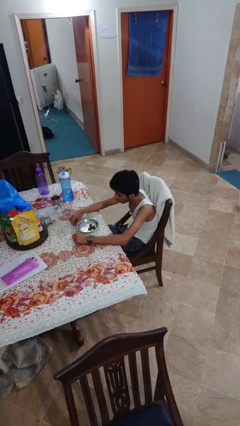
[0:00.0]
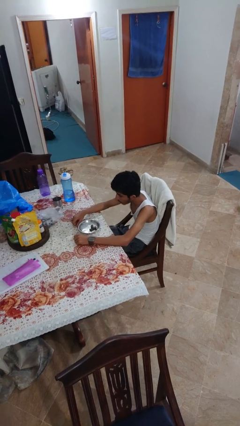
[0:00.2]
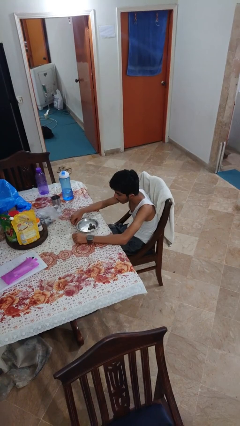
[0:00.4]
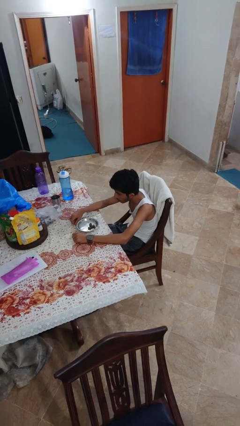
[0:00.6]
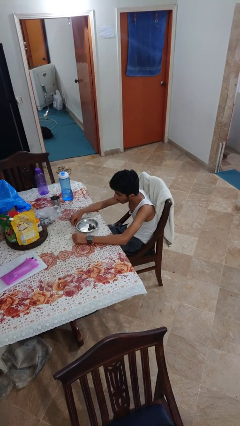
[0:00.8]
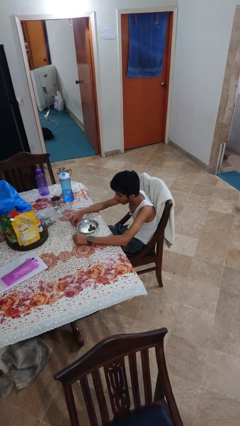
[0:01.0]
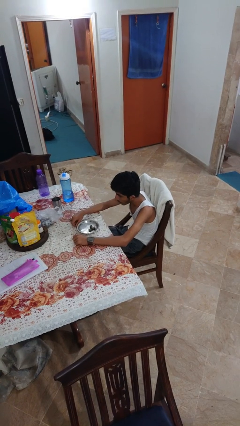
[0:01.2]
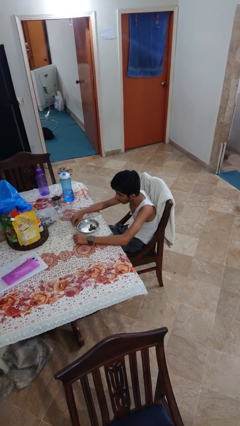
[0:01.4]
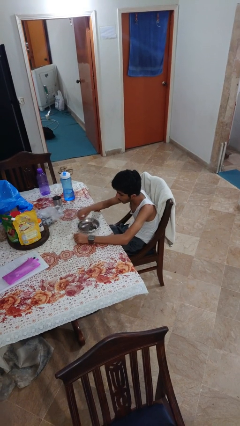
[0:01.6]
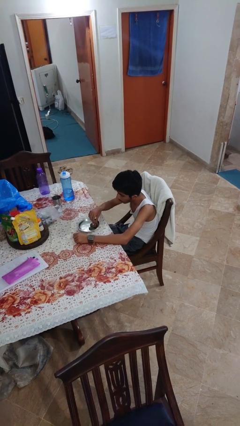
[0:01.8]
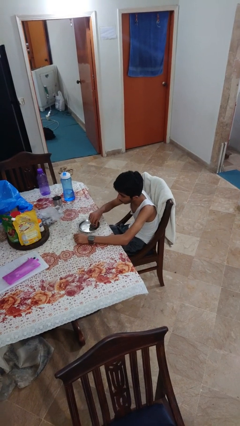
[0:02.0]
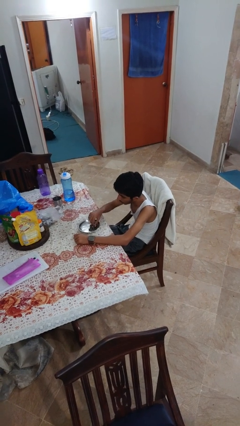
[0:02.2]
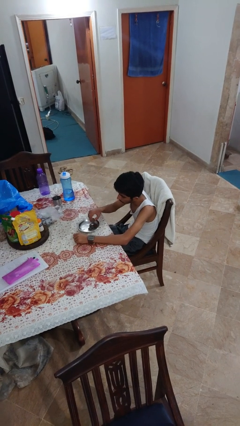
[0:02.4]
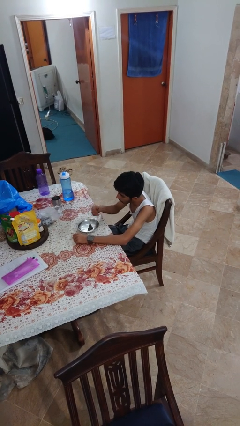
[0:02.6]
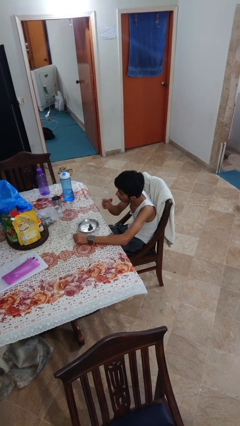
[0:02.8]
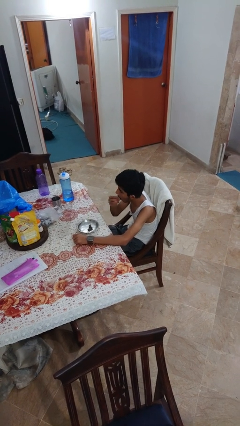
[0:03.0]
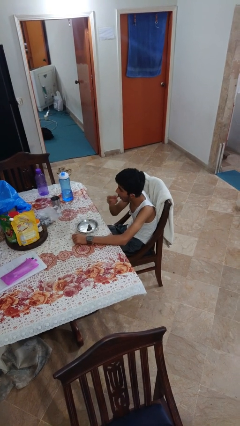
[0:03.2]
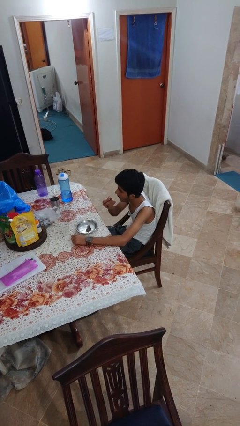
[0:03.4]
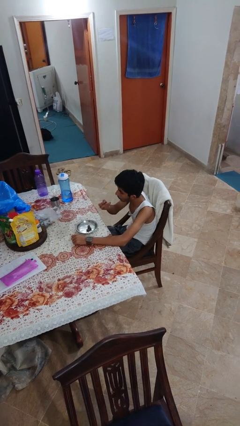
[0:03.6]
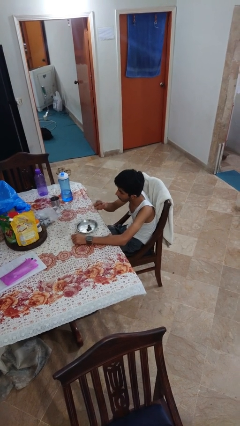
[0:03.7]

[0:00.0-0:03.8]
person eats with hands

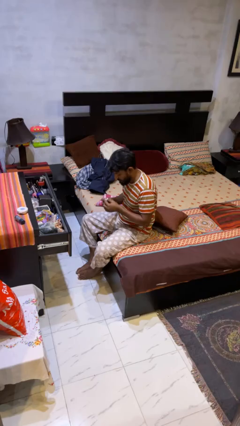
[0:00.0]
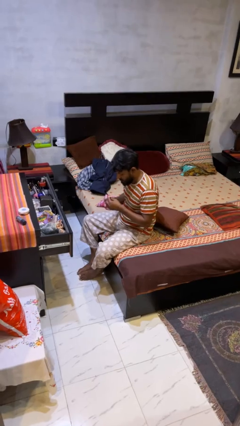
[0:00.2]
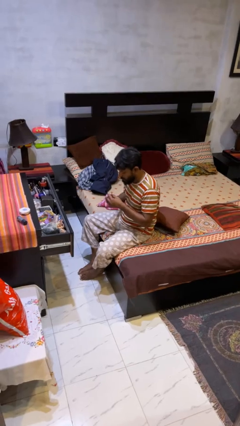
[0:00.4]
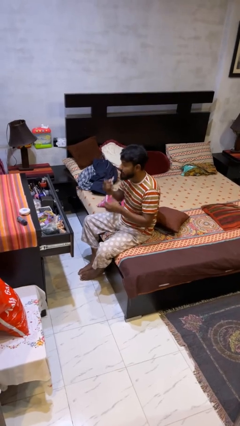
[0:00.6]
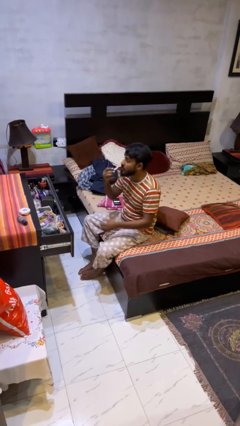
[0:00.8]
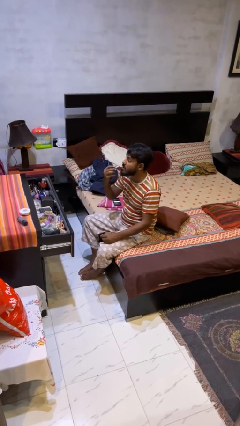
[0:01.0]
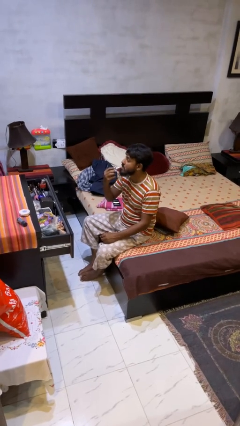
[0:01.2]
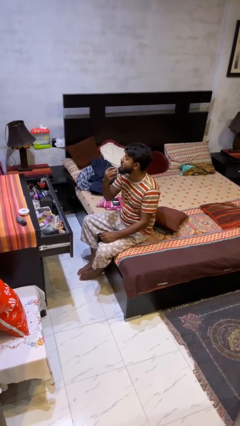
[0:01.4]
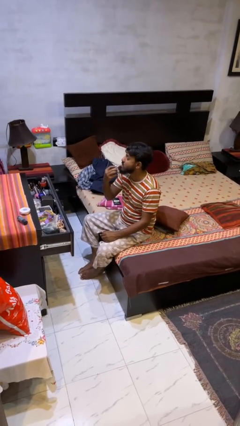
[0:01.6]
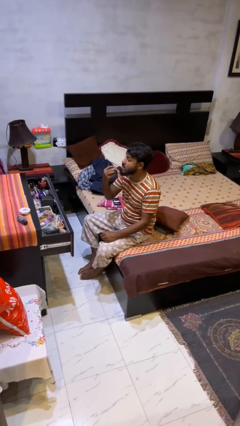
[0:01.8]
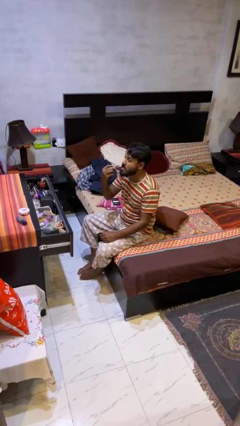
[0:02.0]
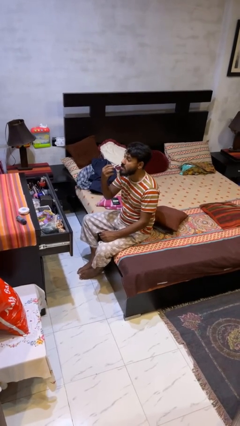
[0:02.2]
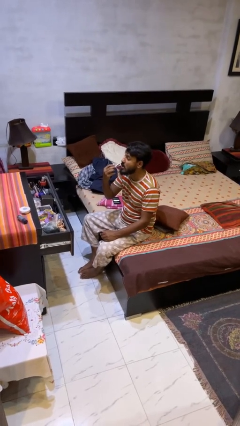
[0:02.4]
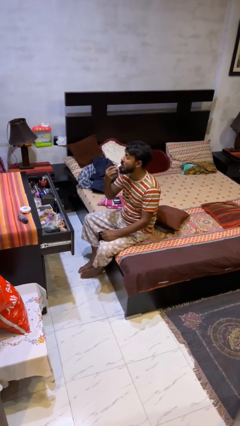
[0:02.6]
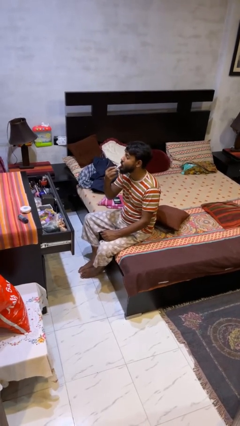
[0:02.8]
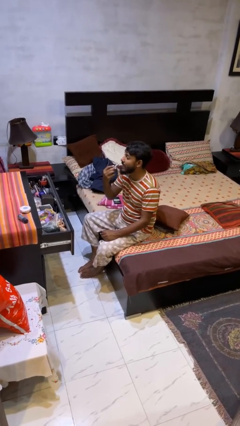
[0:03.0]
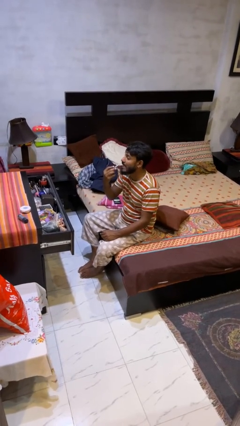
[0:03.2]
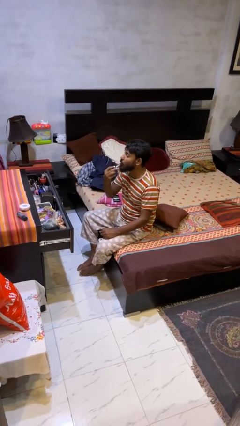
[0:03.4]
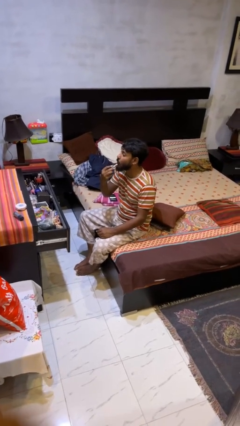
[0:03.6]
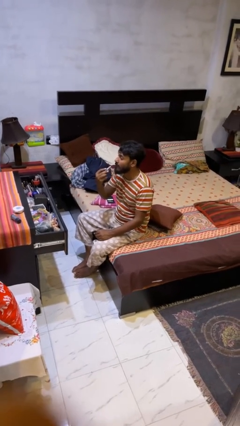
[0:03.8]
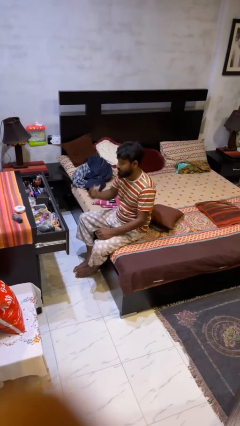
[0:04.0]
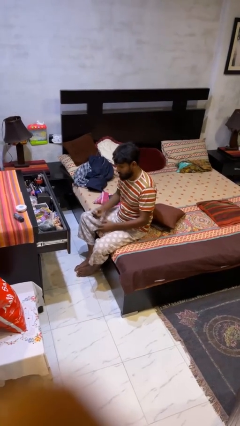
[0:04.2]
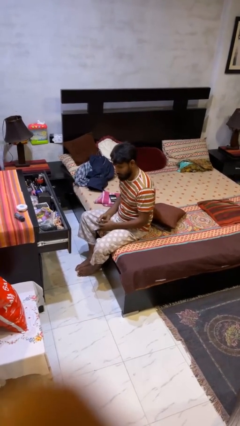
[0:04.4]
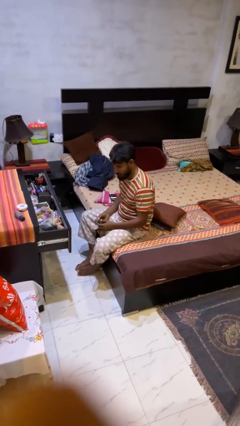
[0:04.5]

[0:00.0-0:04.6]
person applies lip makeup

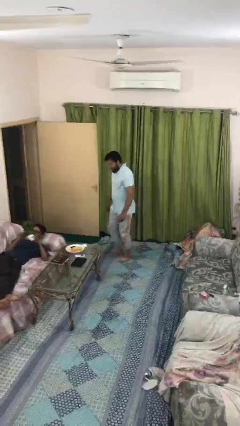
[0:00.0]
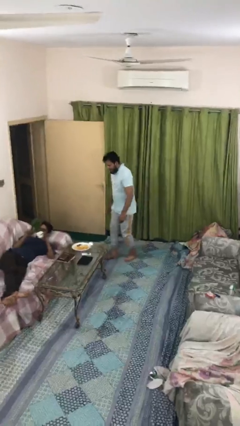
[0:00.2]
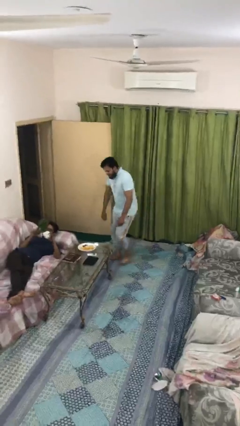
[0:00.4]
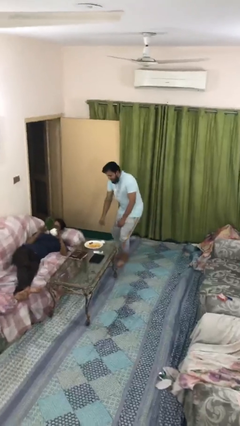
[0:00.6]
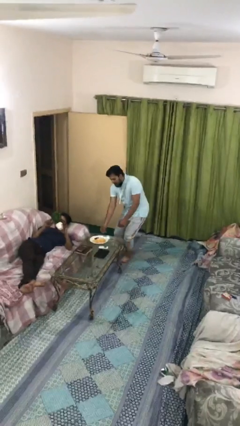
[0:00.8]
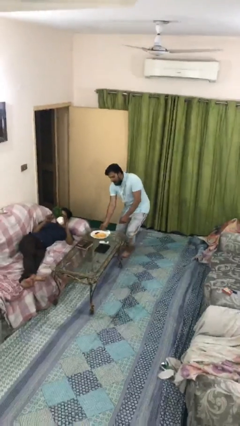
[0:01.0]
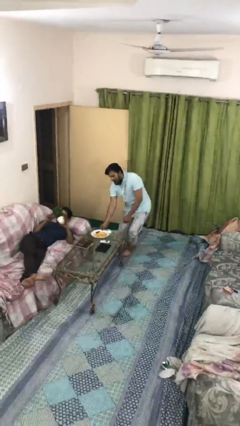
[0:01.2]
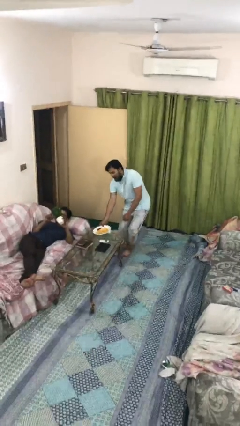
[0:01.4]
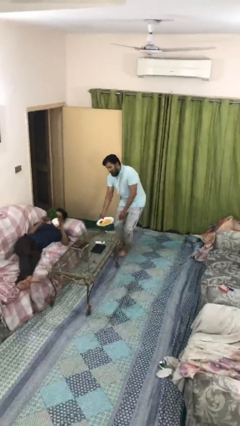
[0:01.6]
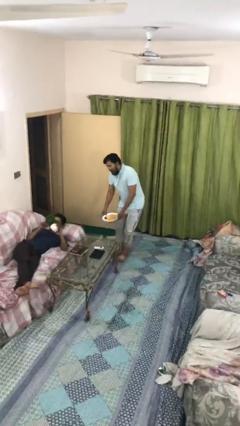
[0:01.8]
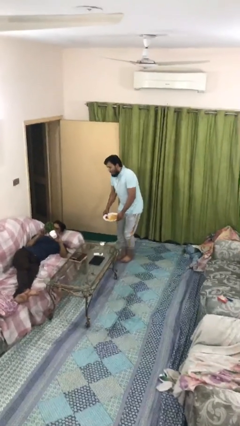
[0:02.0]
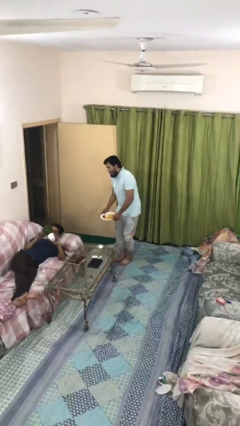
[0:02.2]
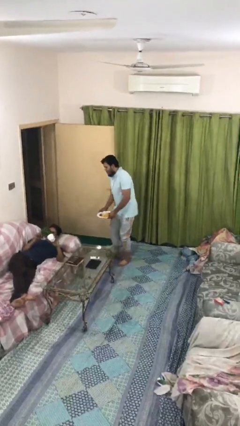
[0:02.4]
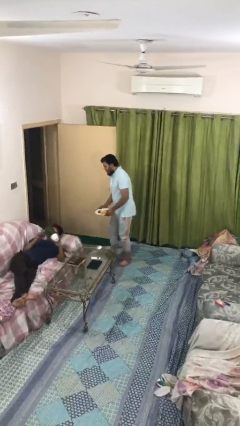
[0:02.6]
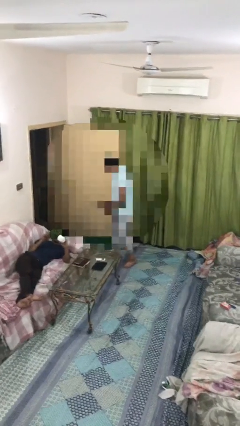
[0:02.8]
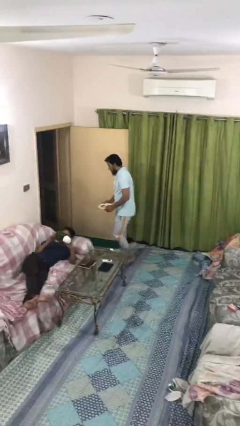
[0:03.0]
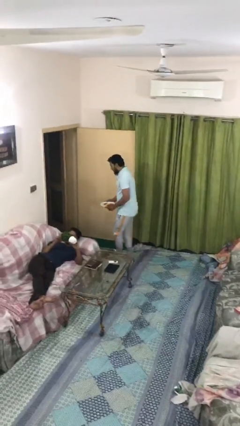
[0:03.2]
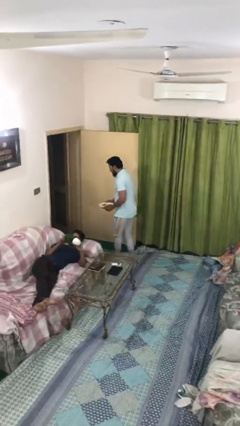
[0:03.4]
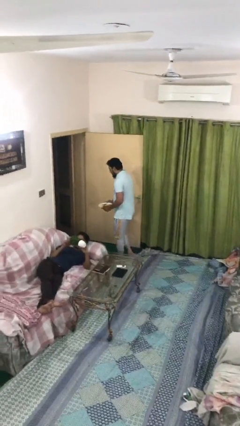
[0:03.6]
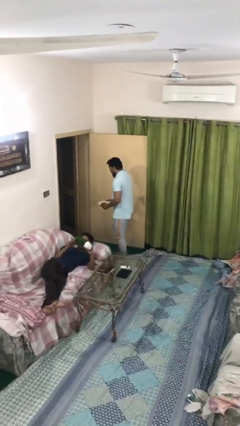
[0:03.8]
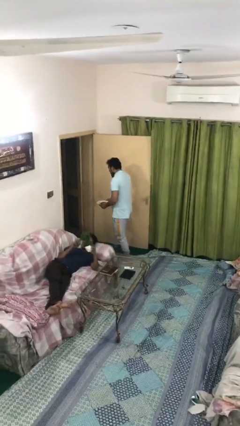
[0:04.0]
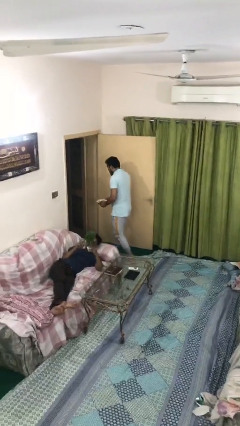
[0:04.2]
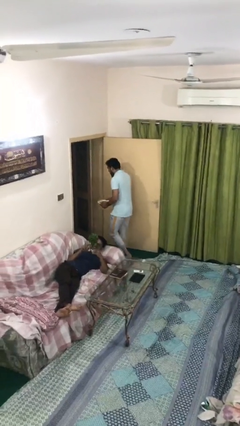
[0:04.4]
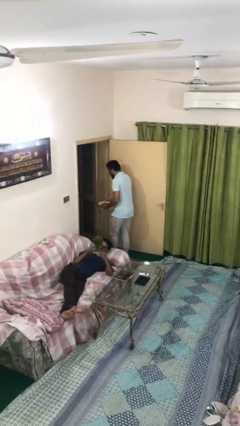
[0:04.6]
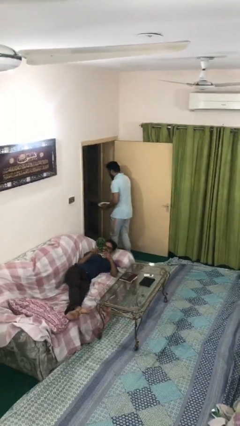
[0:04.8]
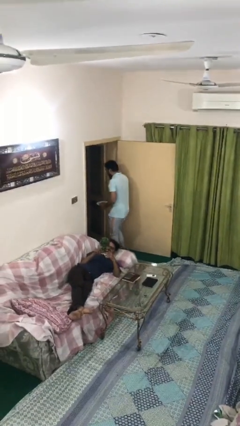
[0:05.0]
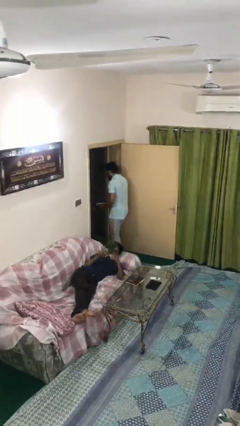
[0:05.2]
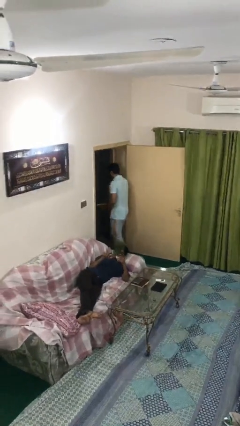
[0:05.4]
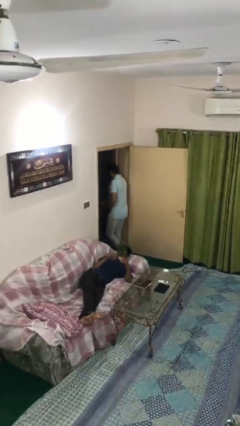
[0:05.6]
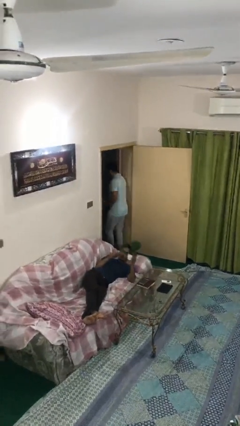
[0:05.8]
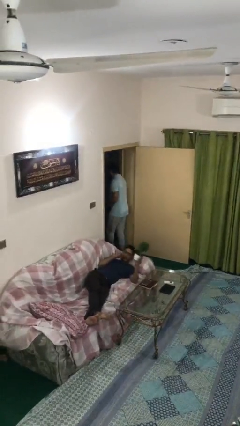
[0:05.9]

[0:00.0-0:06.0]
person steals object from person

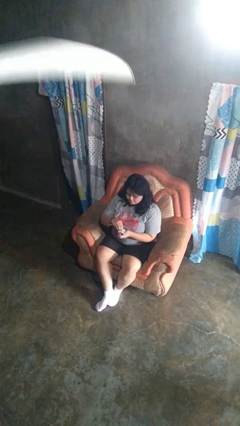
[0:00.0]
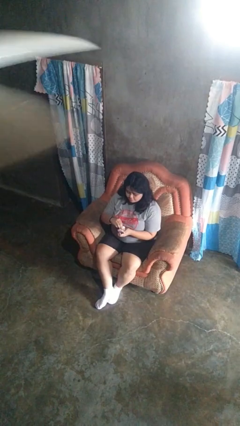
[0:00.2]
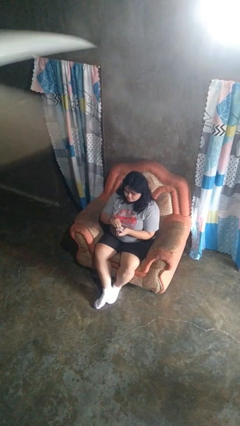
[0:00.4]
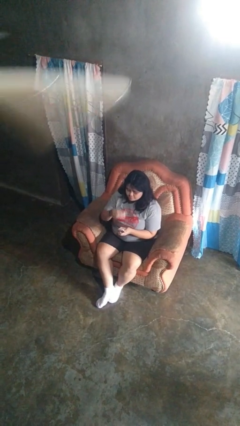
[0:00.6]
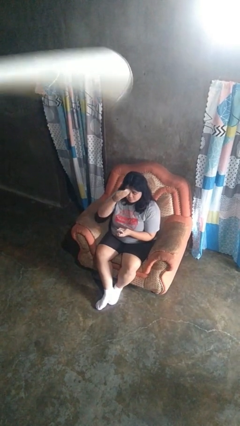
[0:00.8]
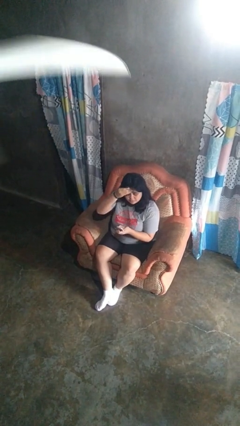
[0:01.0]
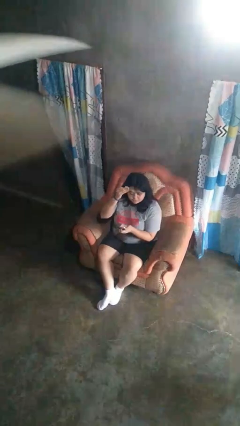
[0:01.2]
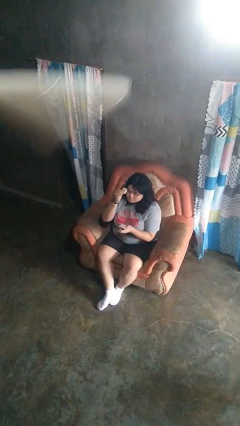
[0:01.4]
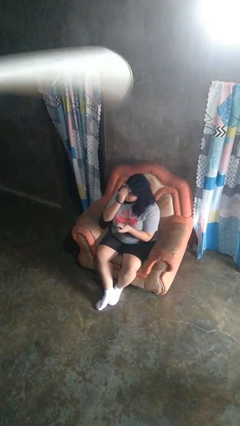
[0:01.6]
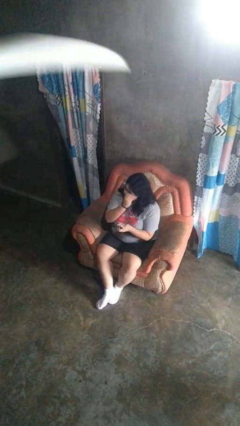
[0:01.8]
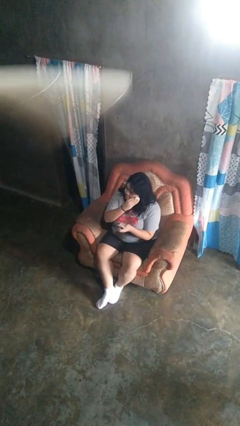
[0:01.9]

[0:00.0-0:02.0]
person applies foundation makeup

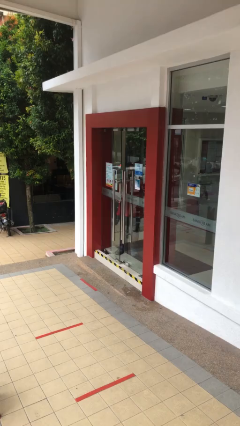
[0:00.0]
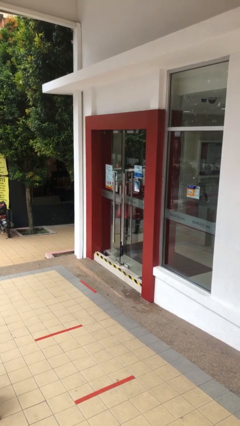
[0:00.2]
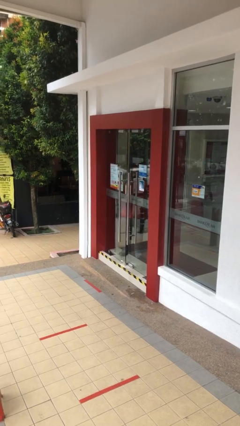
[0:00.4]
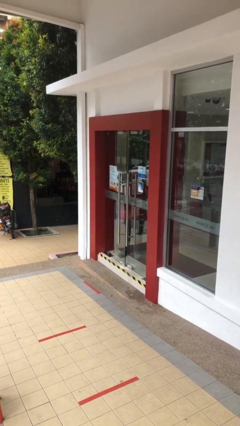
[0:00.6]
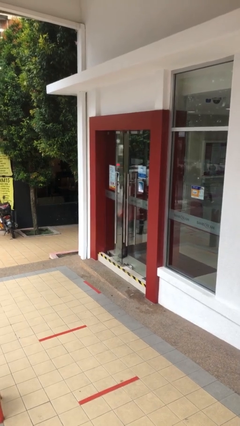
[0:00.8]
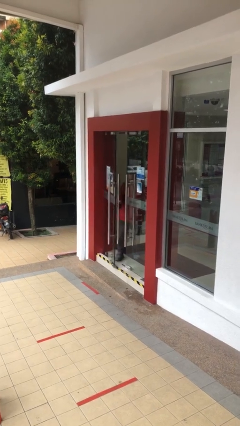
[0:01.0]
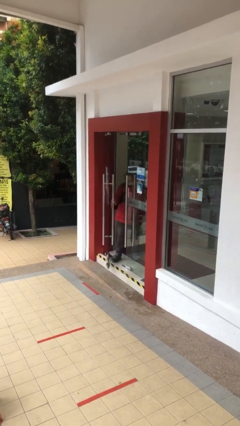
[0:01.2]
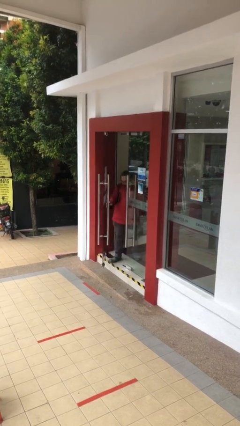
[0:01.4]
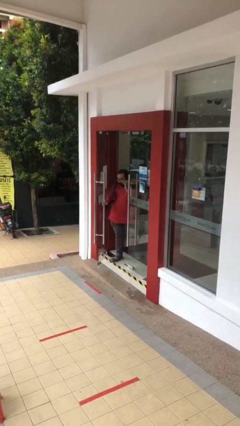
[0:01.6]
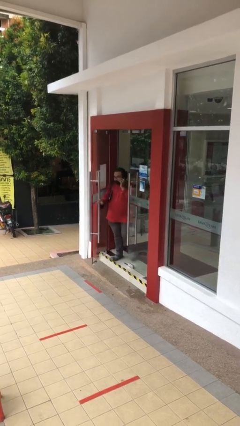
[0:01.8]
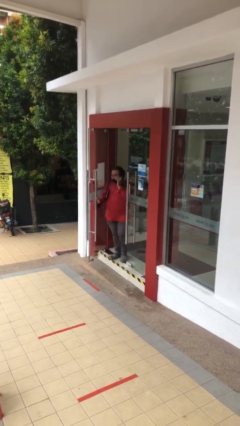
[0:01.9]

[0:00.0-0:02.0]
person opens facility door
